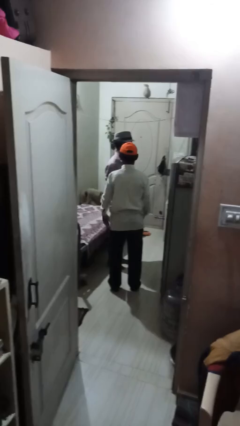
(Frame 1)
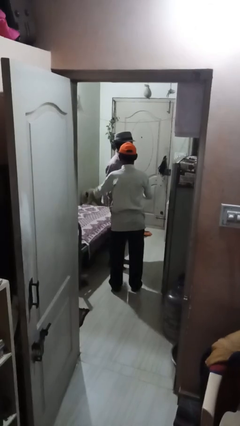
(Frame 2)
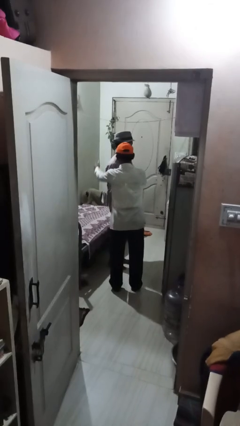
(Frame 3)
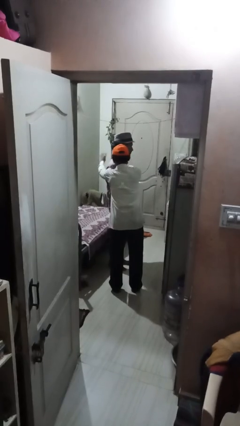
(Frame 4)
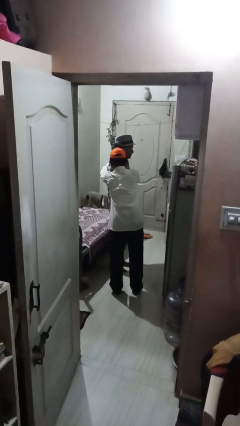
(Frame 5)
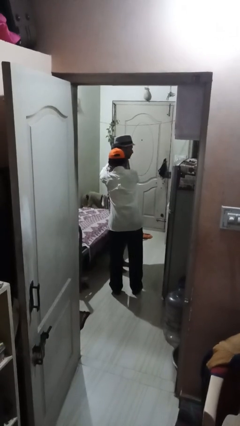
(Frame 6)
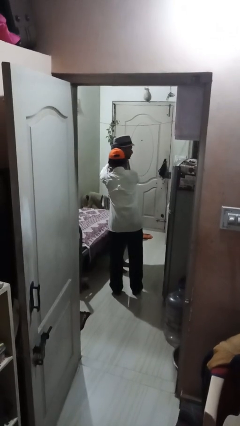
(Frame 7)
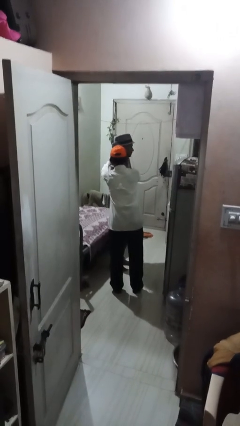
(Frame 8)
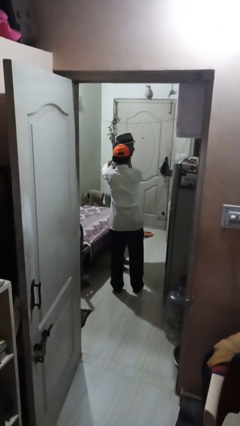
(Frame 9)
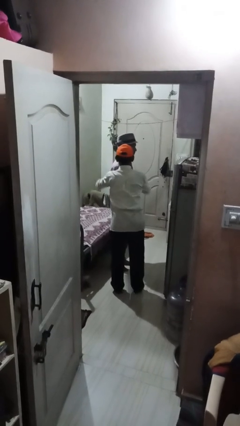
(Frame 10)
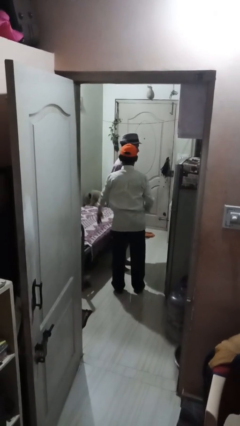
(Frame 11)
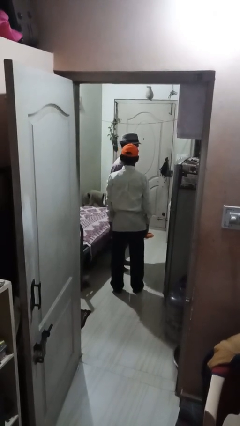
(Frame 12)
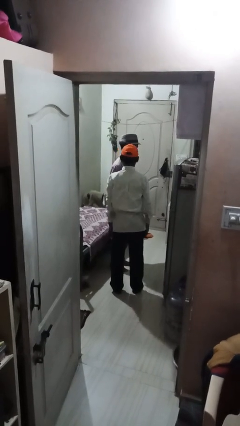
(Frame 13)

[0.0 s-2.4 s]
person pounds shoulders of person

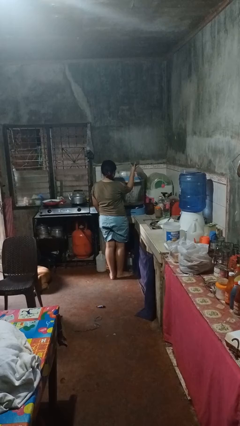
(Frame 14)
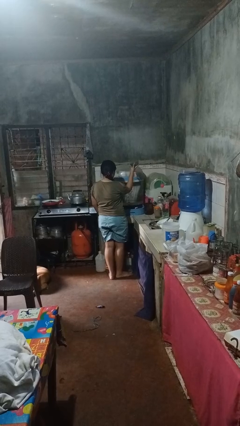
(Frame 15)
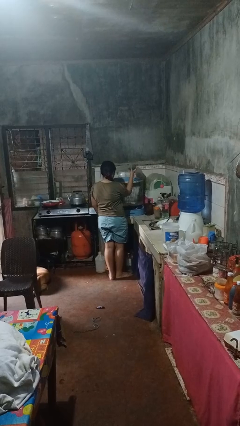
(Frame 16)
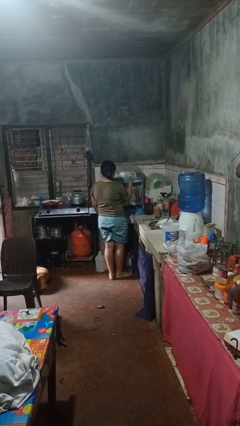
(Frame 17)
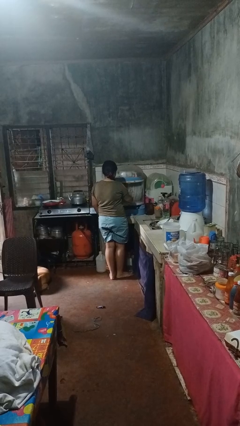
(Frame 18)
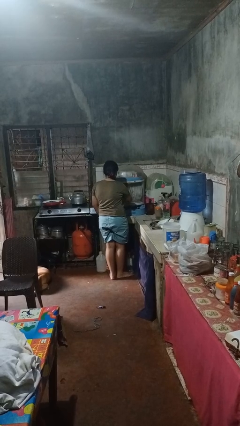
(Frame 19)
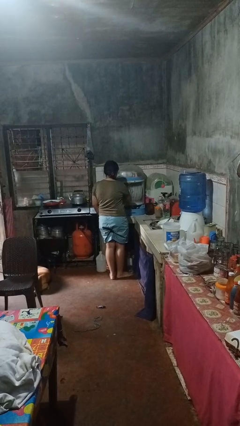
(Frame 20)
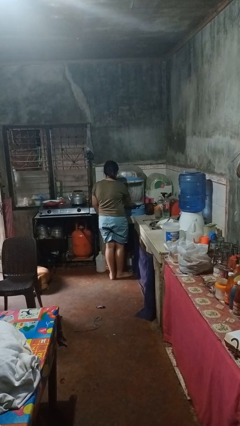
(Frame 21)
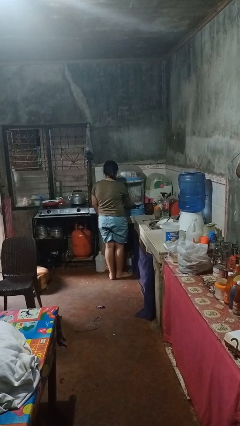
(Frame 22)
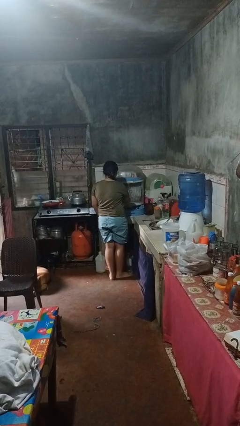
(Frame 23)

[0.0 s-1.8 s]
person puts object into kitchen drawer

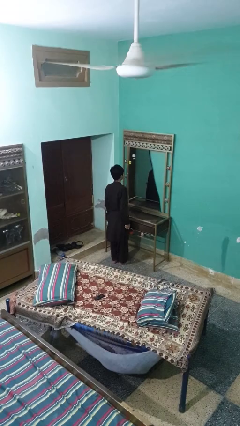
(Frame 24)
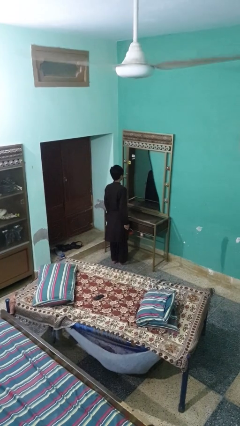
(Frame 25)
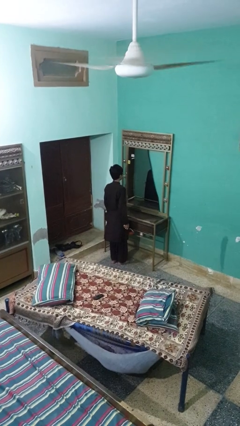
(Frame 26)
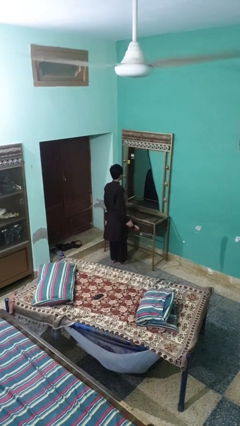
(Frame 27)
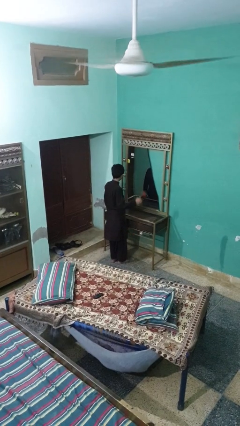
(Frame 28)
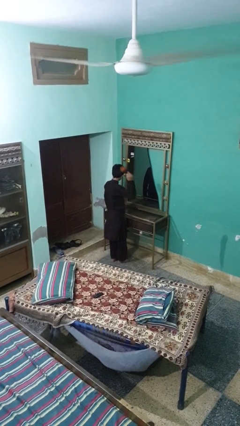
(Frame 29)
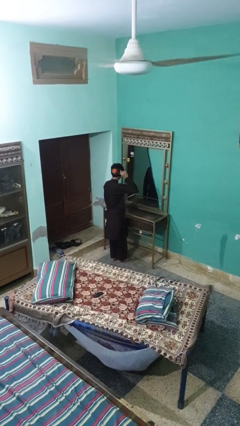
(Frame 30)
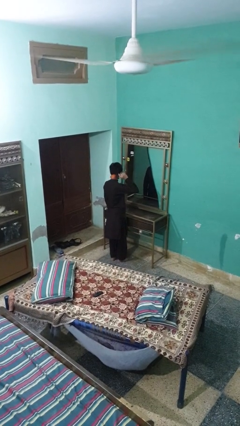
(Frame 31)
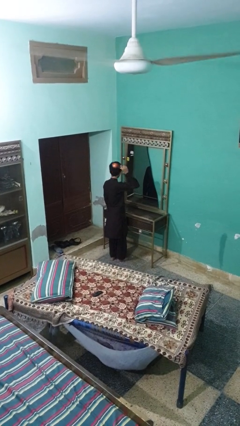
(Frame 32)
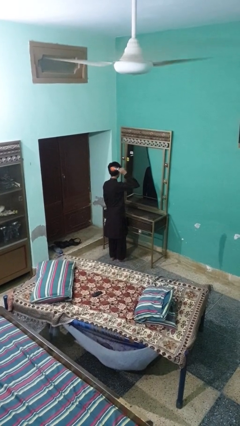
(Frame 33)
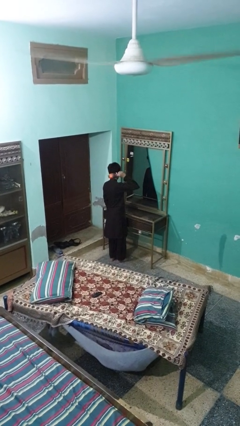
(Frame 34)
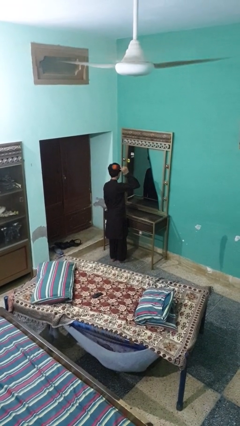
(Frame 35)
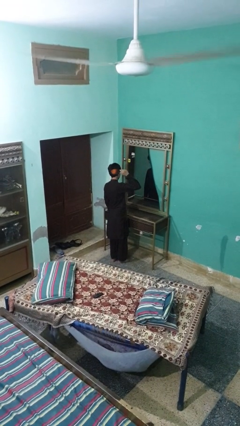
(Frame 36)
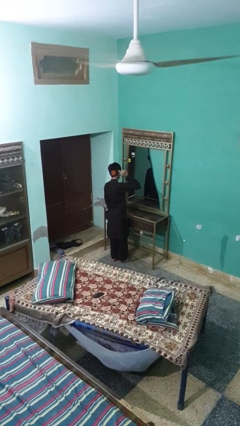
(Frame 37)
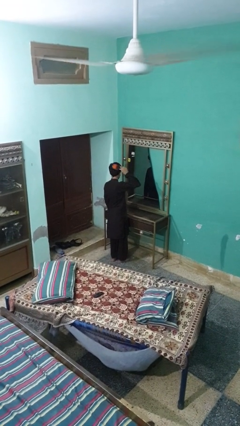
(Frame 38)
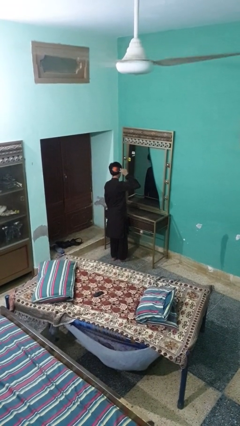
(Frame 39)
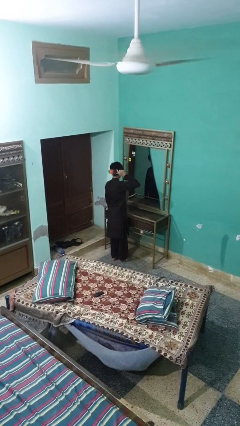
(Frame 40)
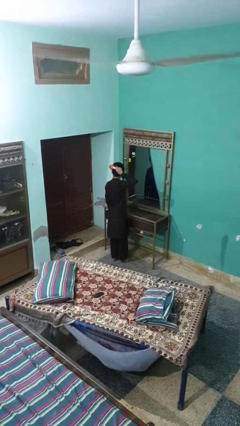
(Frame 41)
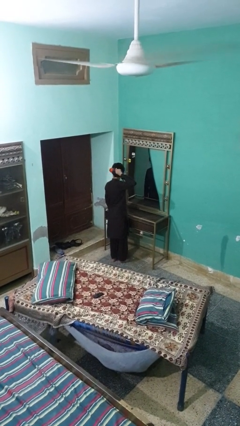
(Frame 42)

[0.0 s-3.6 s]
person brushes hair

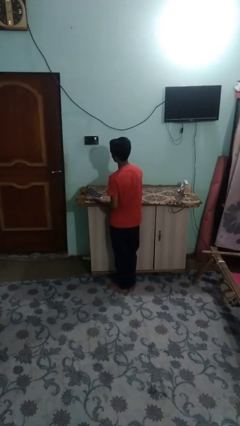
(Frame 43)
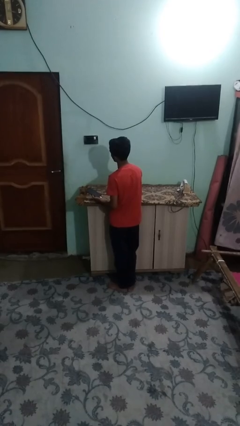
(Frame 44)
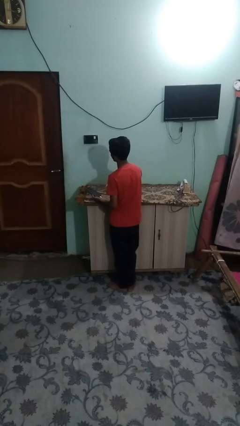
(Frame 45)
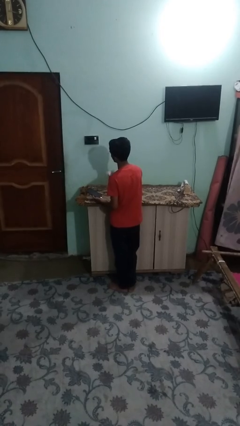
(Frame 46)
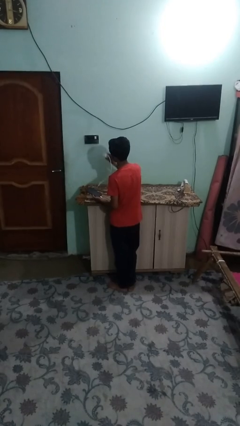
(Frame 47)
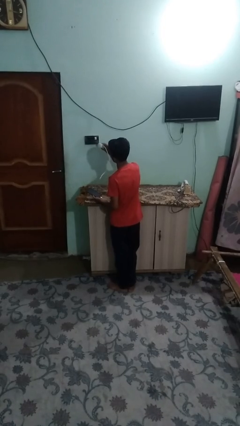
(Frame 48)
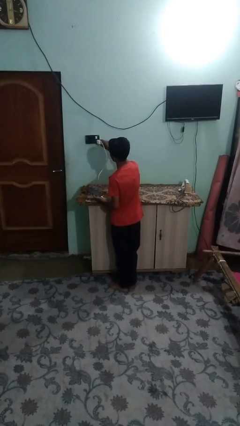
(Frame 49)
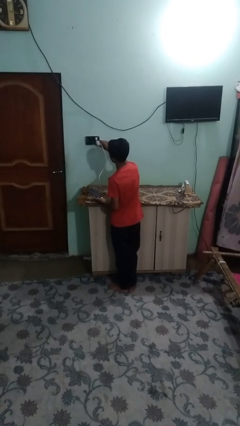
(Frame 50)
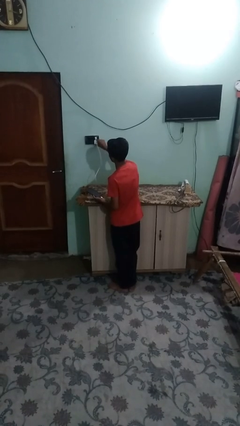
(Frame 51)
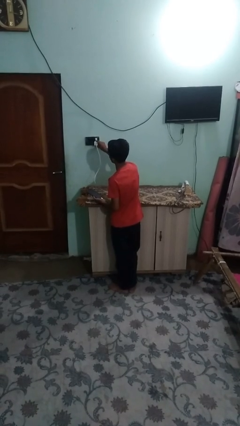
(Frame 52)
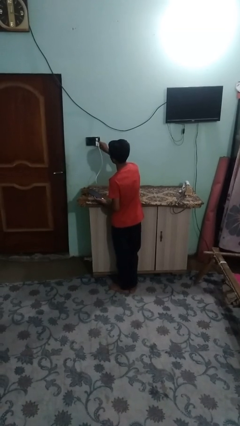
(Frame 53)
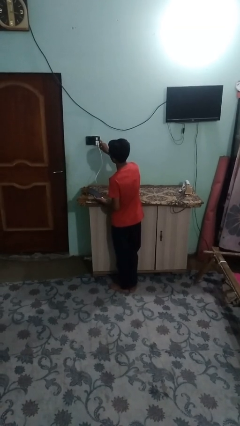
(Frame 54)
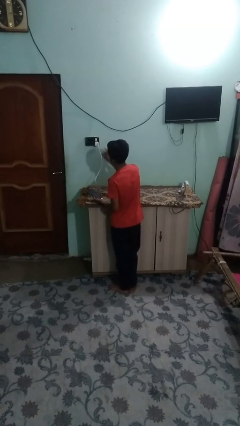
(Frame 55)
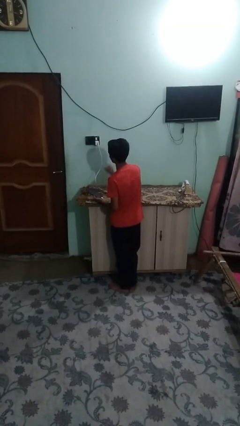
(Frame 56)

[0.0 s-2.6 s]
person plugs into electrical socket

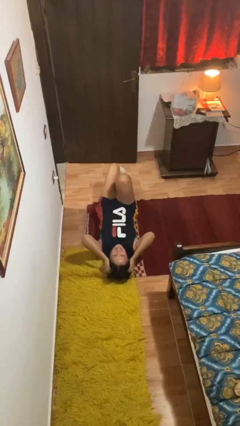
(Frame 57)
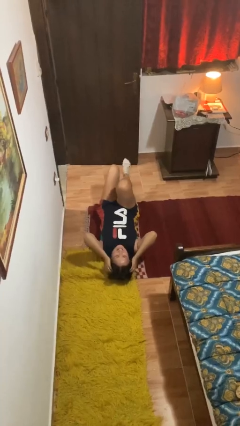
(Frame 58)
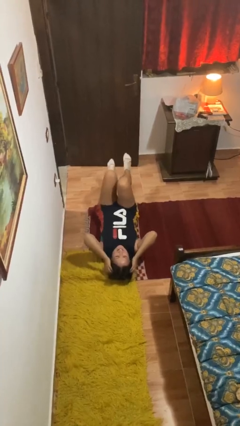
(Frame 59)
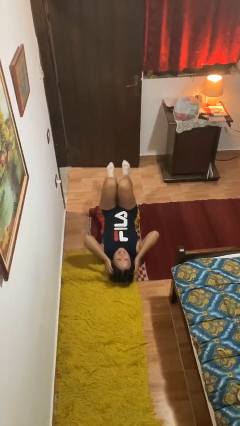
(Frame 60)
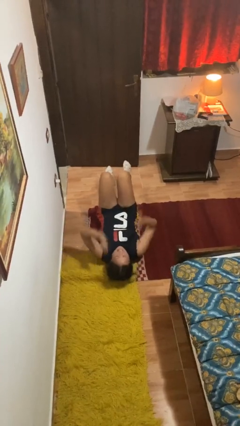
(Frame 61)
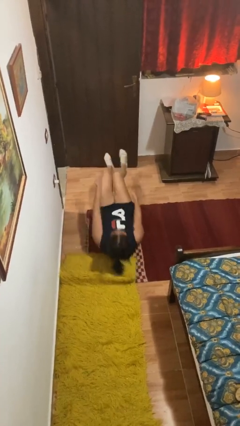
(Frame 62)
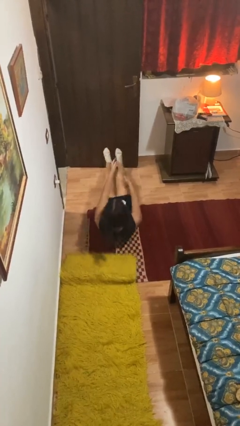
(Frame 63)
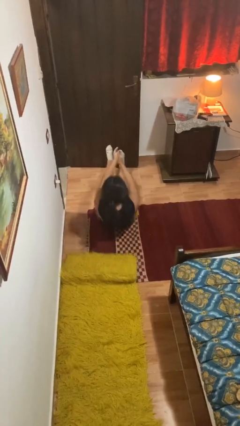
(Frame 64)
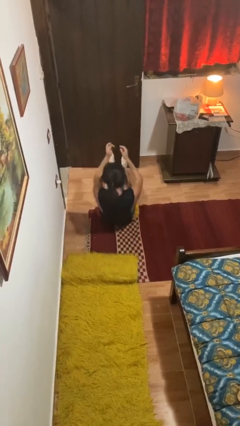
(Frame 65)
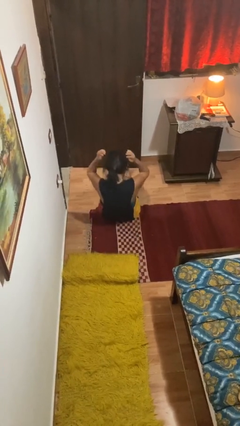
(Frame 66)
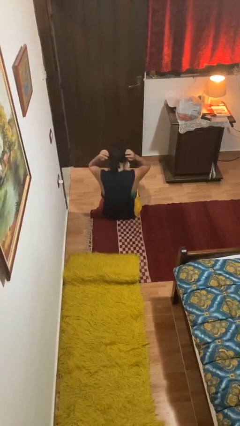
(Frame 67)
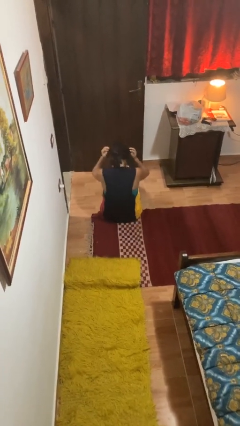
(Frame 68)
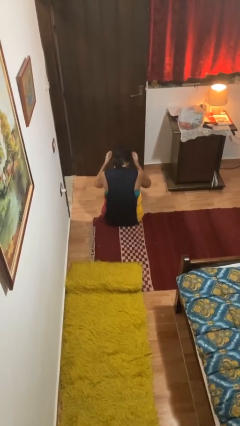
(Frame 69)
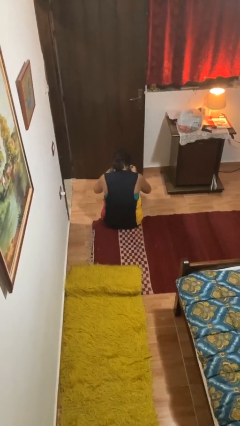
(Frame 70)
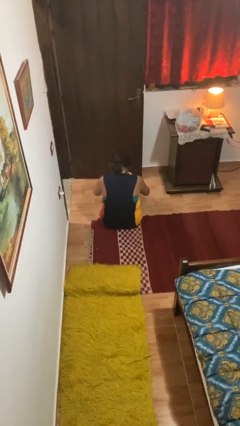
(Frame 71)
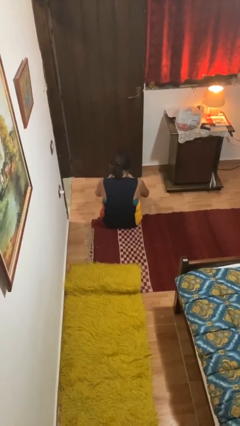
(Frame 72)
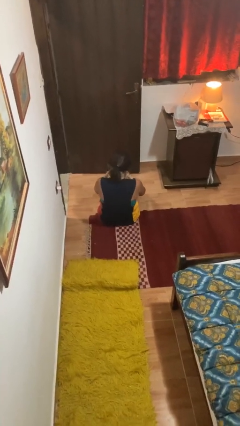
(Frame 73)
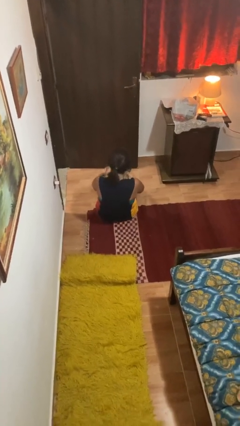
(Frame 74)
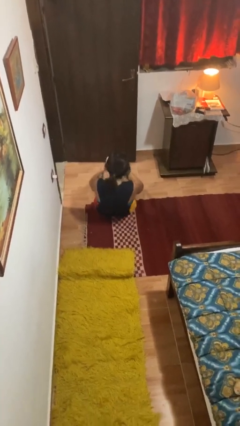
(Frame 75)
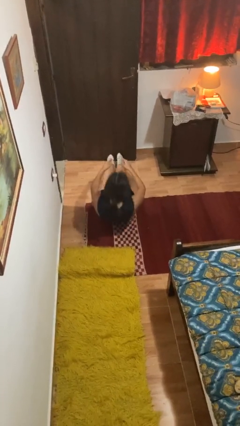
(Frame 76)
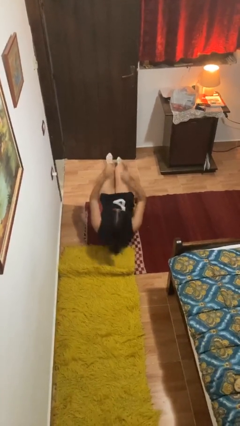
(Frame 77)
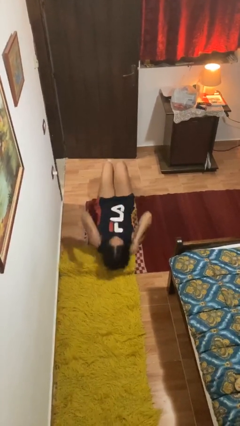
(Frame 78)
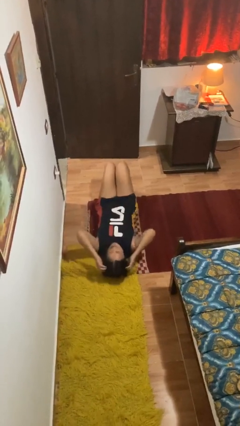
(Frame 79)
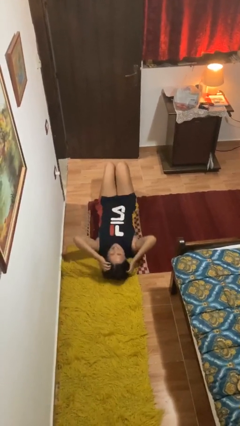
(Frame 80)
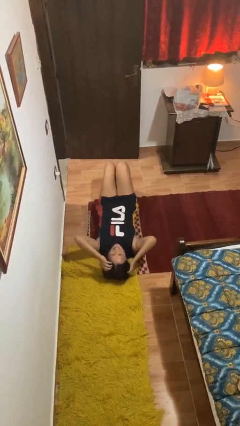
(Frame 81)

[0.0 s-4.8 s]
person exercises with situp

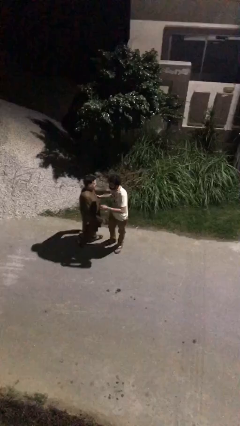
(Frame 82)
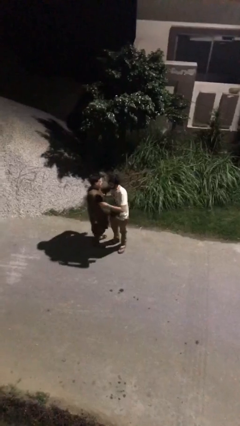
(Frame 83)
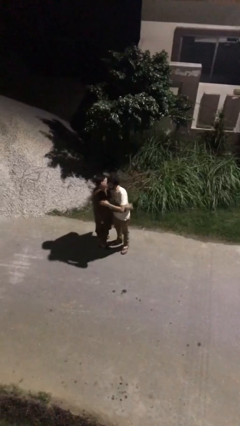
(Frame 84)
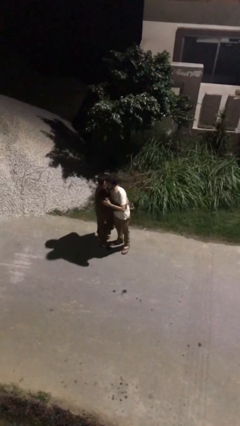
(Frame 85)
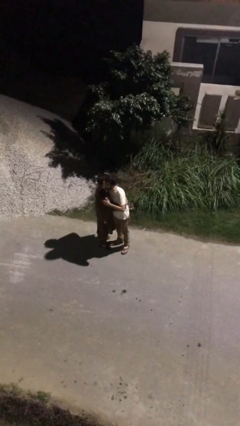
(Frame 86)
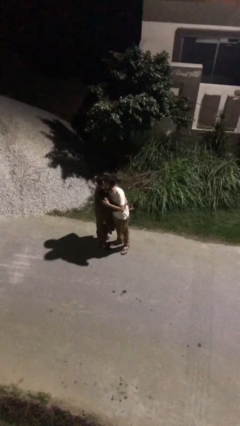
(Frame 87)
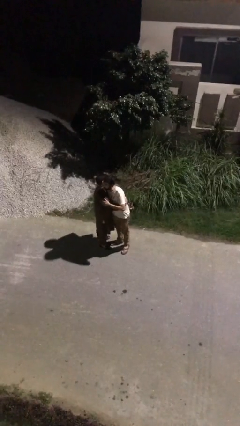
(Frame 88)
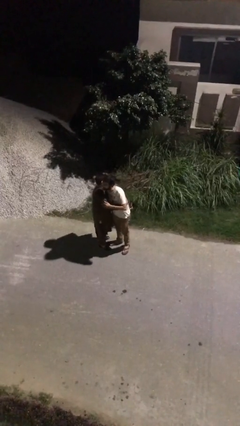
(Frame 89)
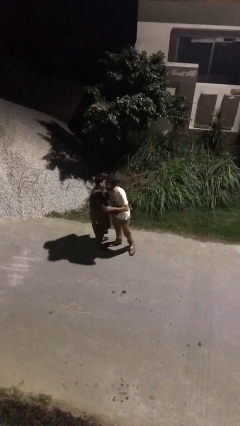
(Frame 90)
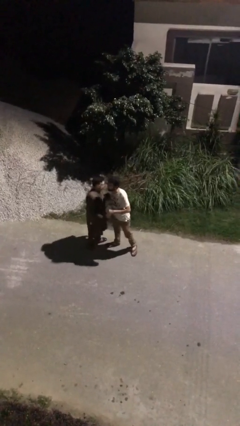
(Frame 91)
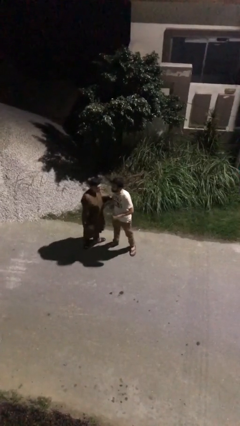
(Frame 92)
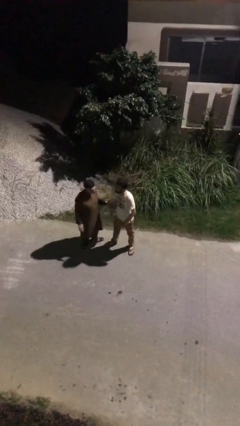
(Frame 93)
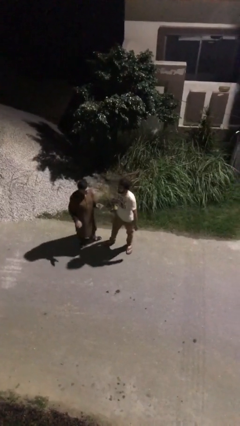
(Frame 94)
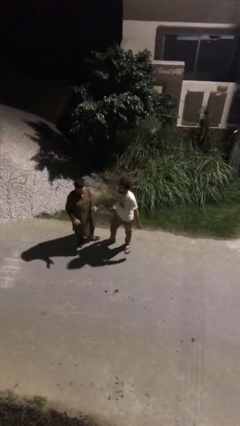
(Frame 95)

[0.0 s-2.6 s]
person embraces person
